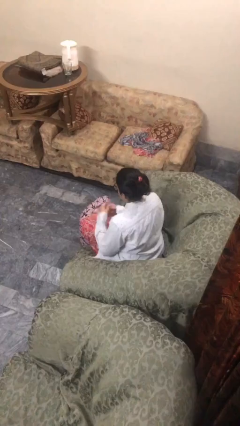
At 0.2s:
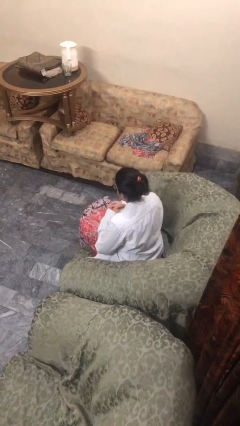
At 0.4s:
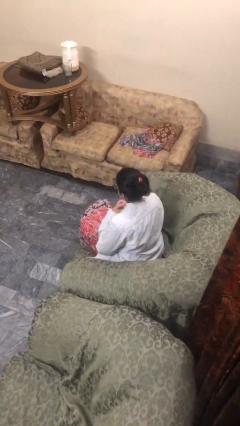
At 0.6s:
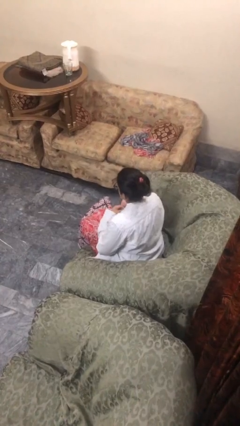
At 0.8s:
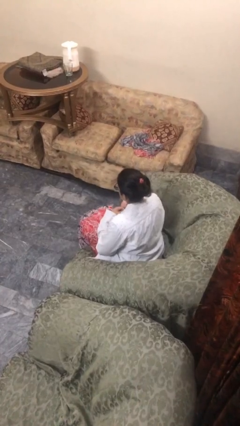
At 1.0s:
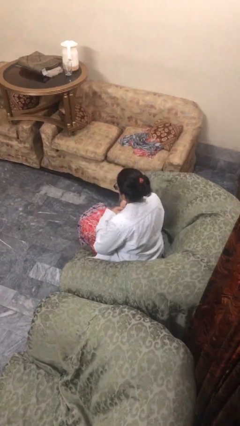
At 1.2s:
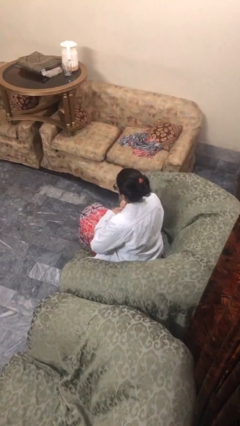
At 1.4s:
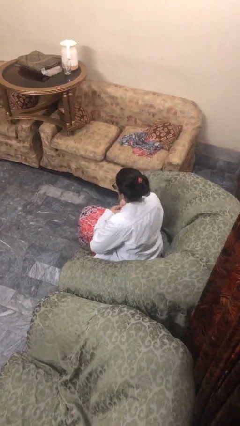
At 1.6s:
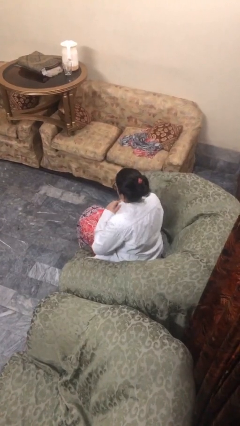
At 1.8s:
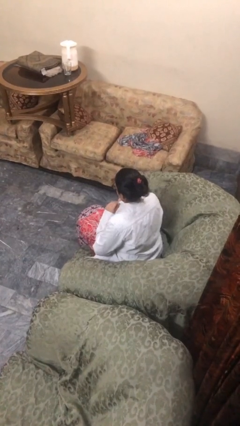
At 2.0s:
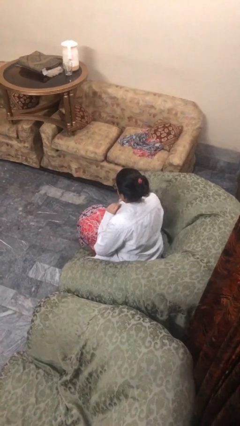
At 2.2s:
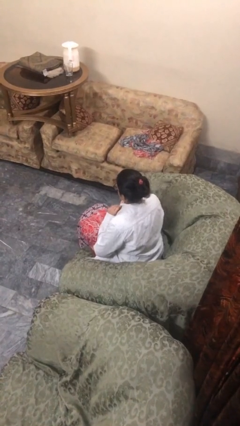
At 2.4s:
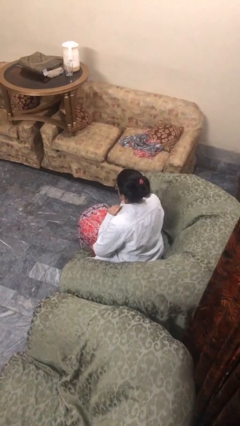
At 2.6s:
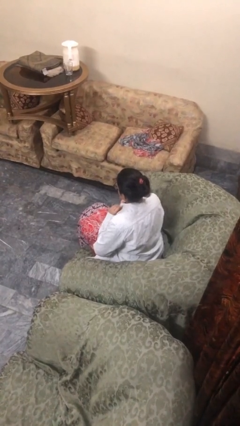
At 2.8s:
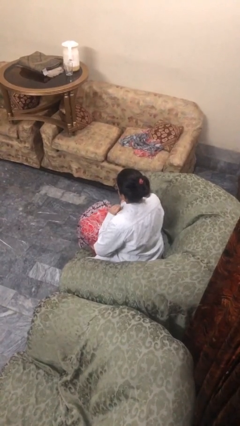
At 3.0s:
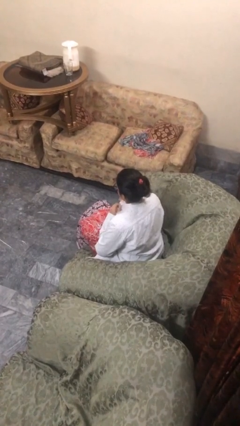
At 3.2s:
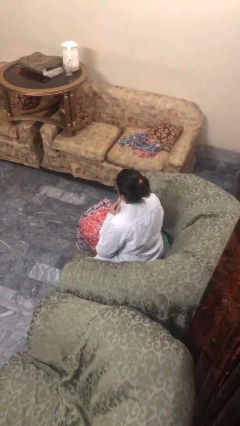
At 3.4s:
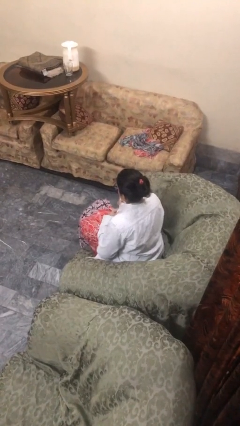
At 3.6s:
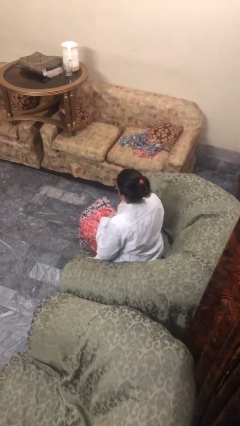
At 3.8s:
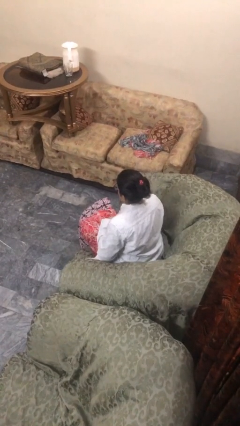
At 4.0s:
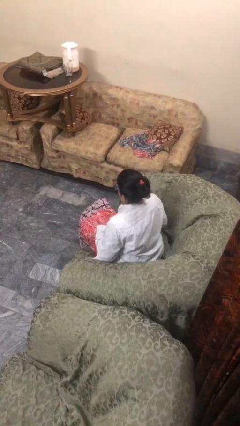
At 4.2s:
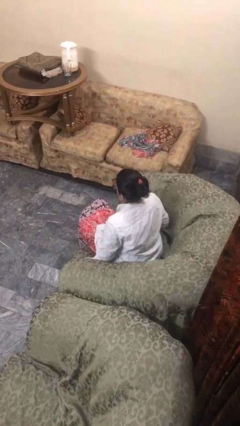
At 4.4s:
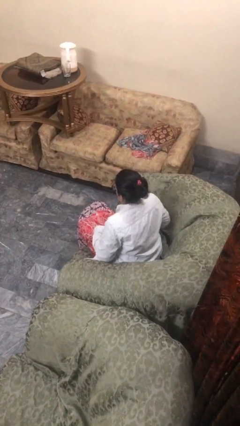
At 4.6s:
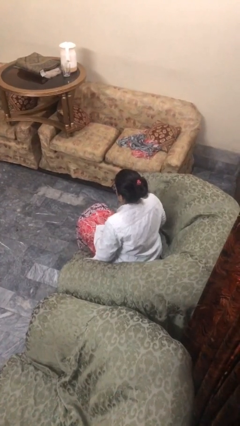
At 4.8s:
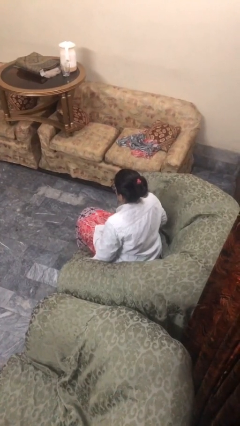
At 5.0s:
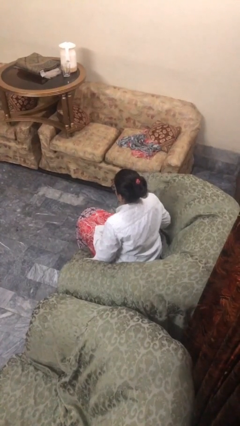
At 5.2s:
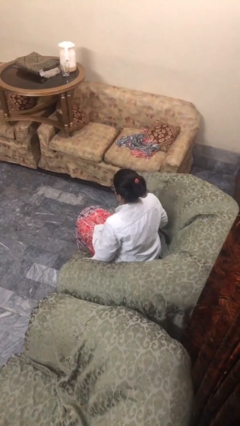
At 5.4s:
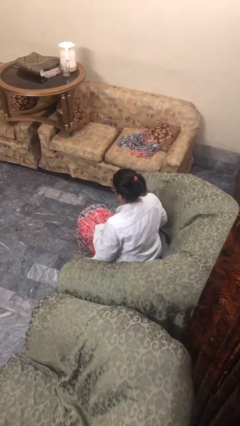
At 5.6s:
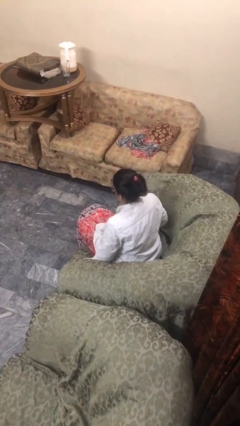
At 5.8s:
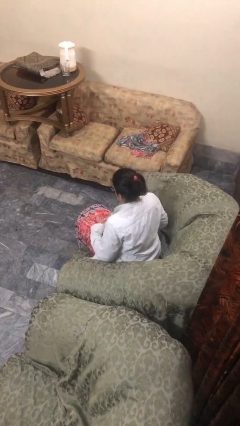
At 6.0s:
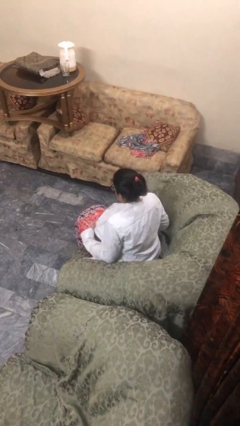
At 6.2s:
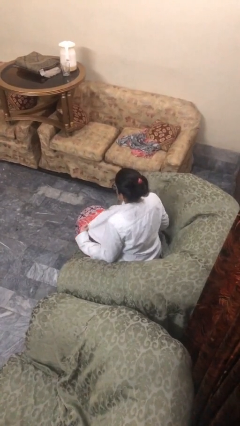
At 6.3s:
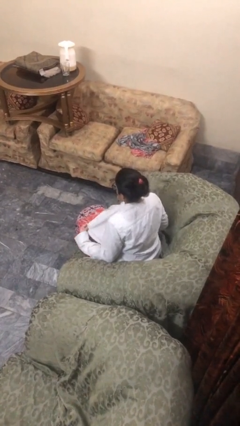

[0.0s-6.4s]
person unbuttons shirt

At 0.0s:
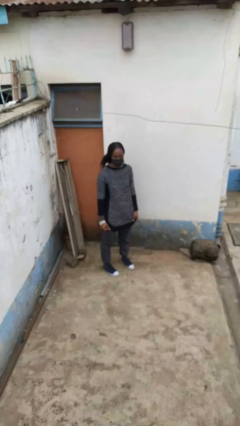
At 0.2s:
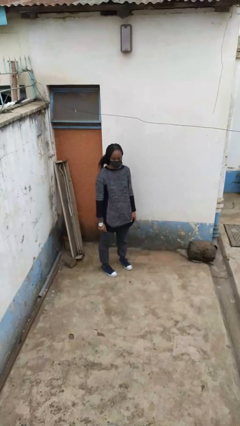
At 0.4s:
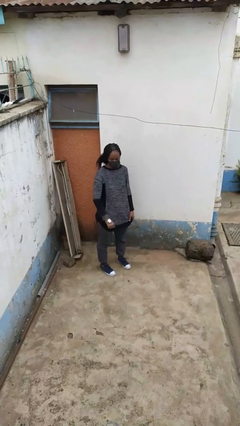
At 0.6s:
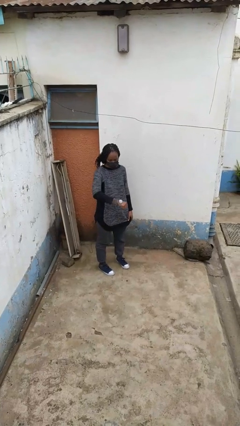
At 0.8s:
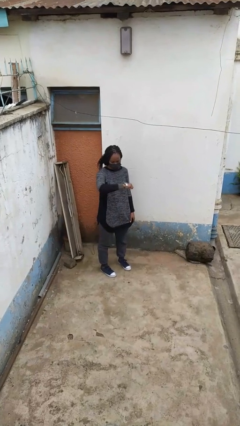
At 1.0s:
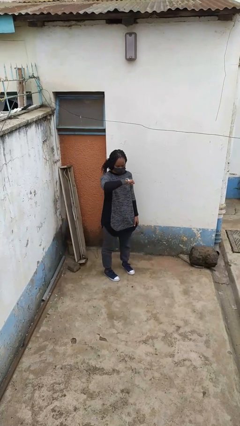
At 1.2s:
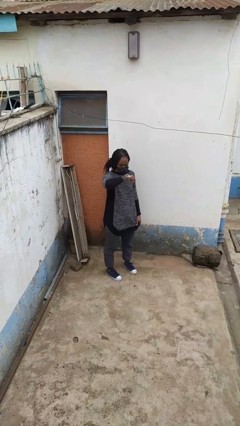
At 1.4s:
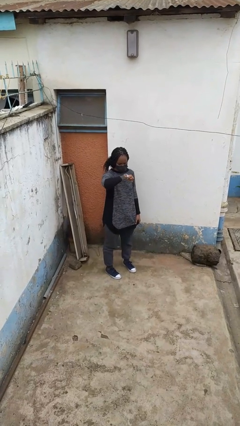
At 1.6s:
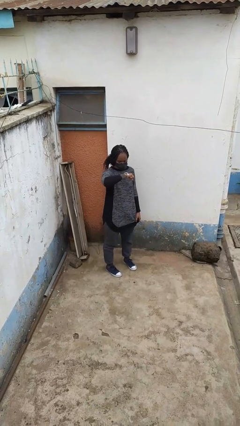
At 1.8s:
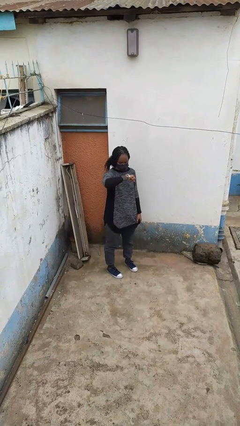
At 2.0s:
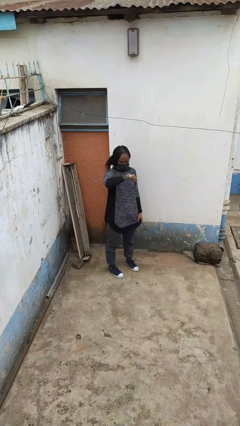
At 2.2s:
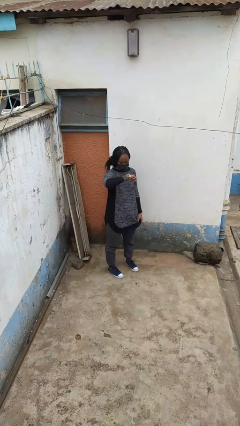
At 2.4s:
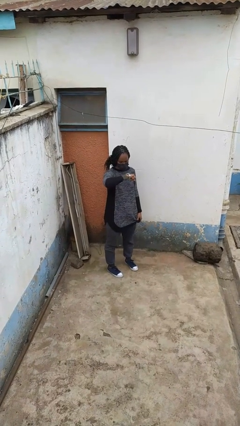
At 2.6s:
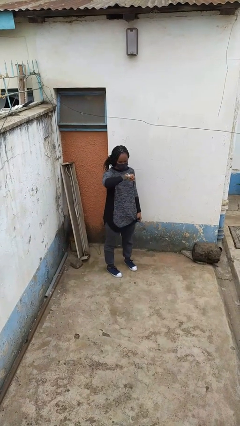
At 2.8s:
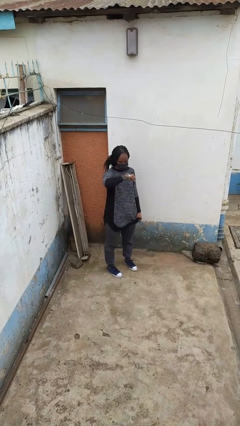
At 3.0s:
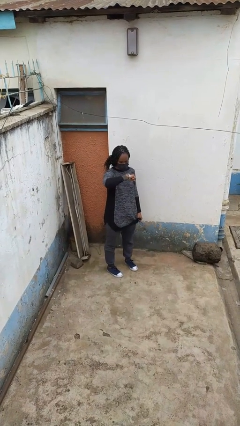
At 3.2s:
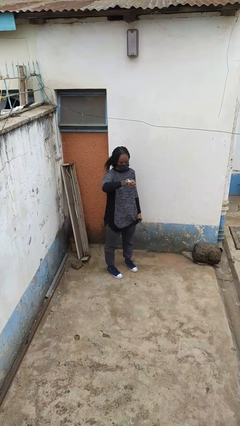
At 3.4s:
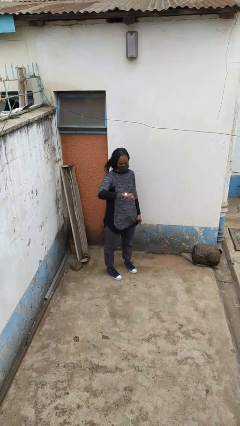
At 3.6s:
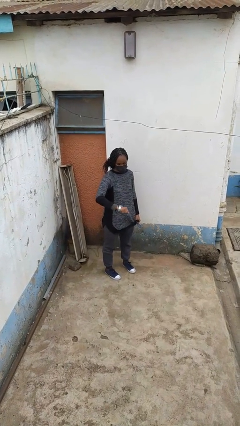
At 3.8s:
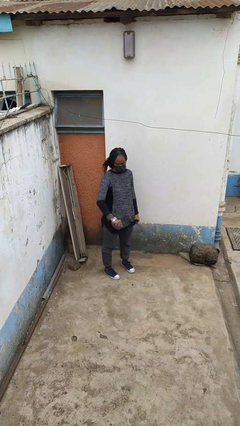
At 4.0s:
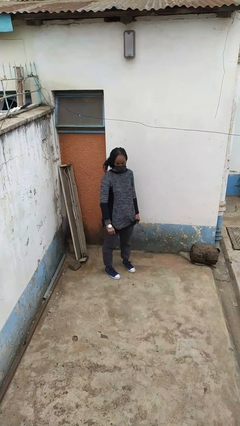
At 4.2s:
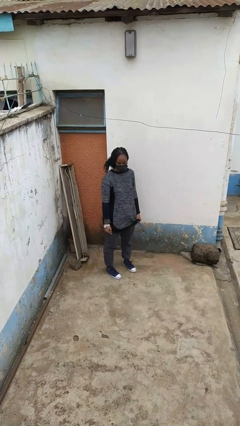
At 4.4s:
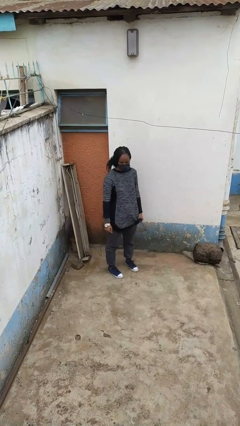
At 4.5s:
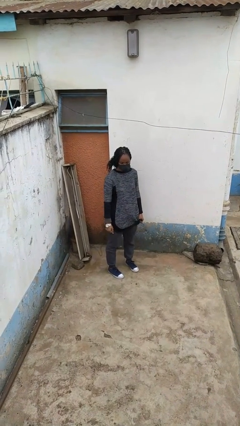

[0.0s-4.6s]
person looks at wristwatch

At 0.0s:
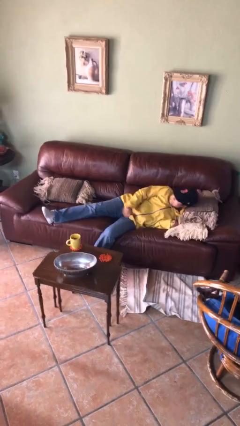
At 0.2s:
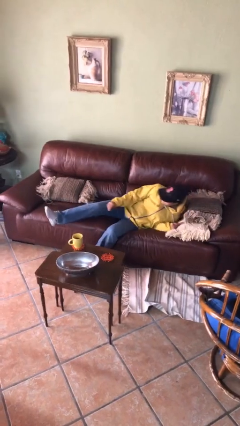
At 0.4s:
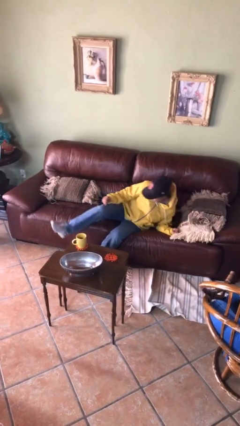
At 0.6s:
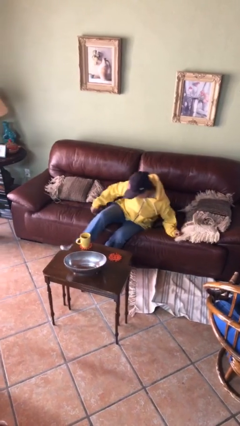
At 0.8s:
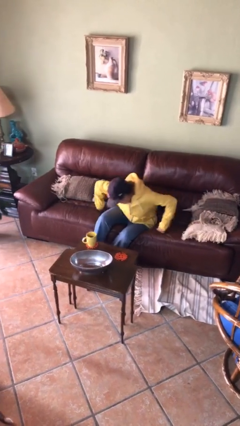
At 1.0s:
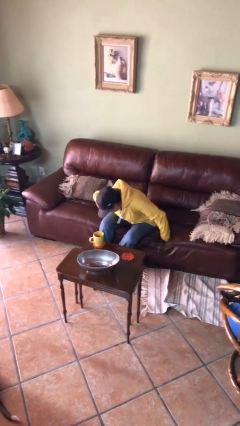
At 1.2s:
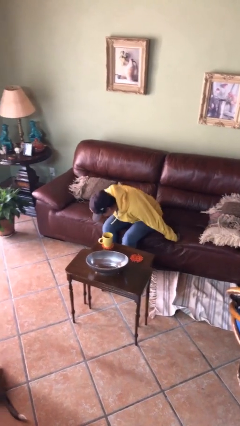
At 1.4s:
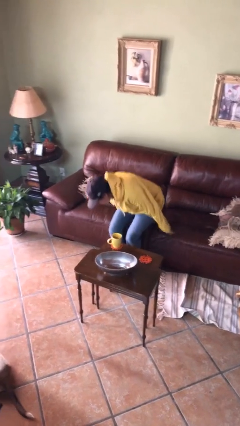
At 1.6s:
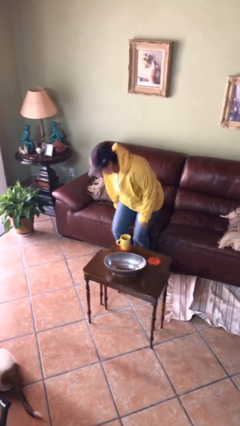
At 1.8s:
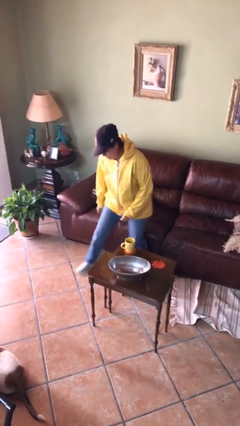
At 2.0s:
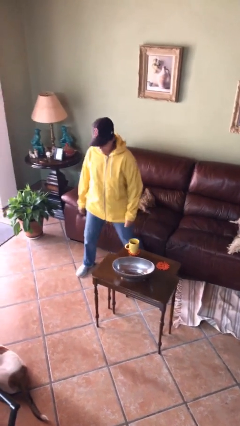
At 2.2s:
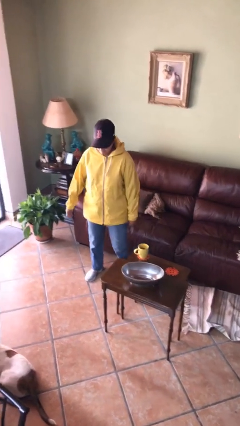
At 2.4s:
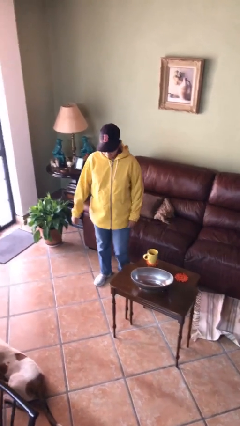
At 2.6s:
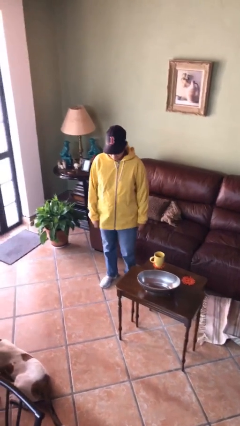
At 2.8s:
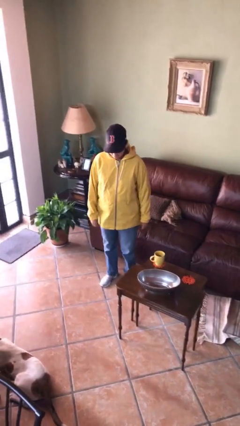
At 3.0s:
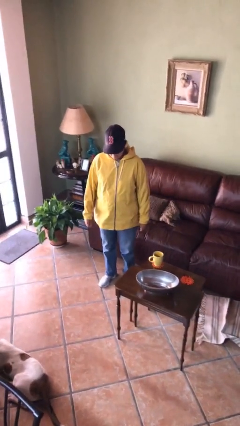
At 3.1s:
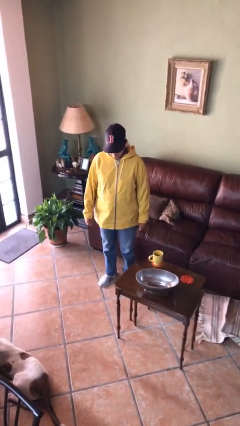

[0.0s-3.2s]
person stands up

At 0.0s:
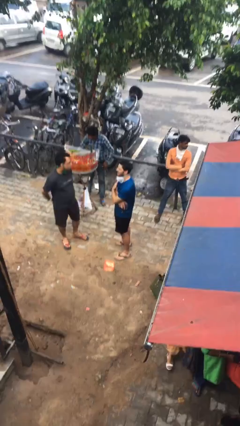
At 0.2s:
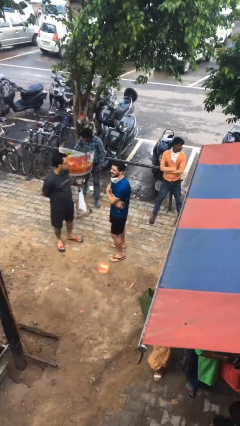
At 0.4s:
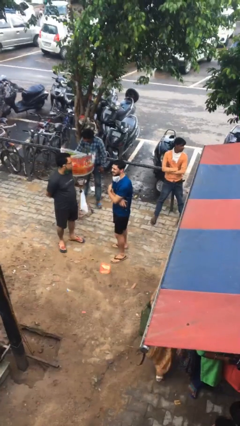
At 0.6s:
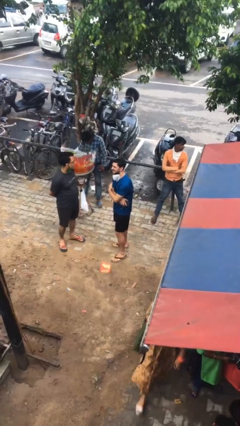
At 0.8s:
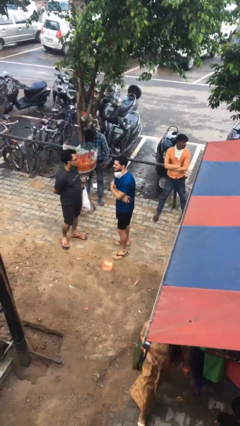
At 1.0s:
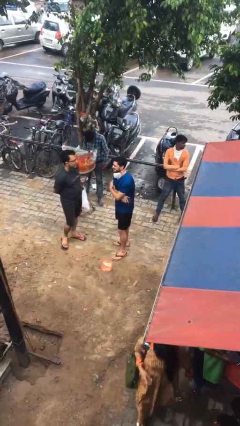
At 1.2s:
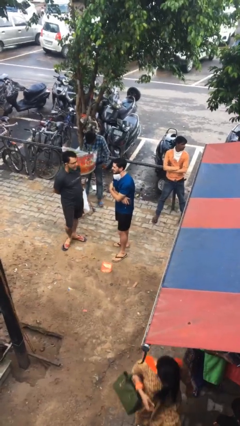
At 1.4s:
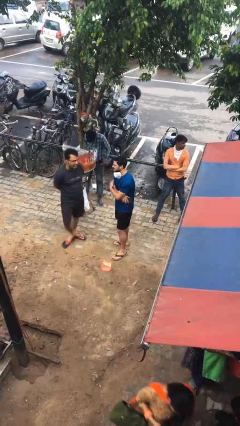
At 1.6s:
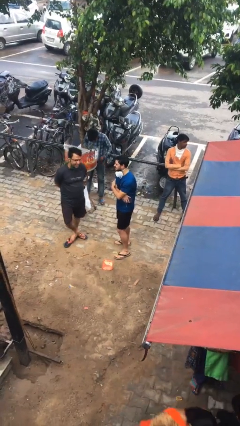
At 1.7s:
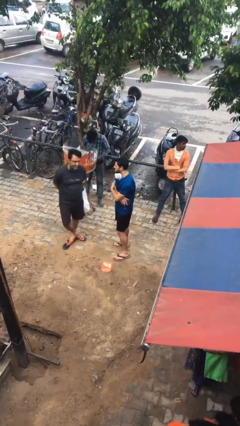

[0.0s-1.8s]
person laughs with person

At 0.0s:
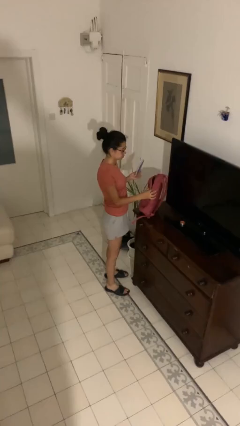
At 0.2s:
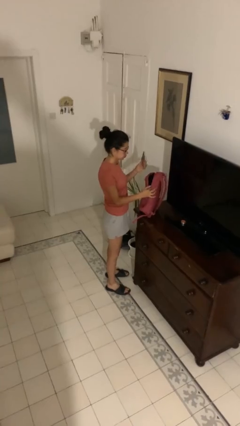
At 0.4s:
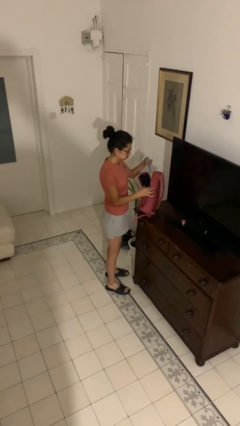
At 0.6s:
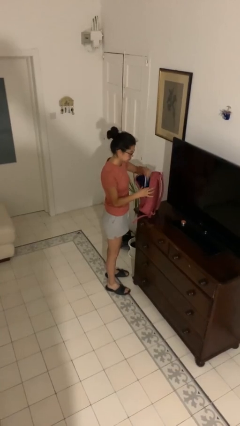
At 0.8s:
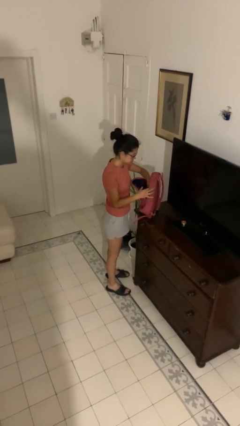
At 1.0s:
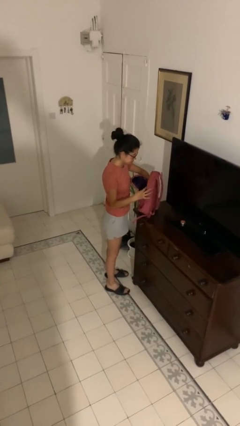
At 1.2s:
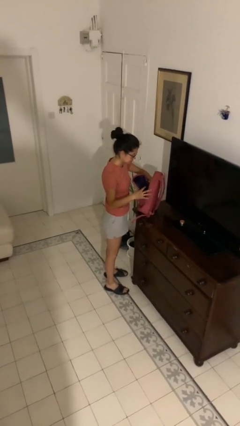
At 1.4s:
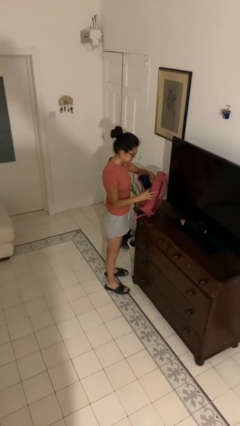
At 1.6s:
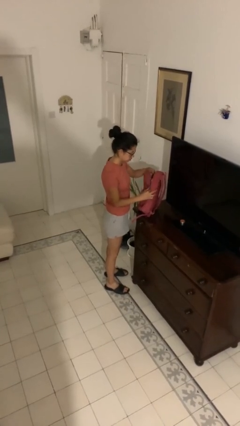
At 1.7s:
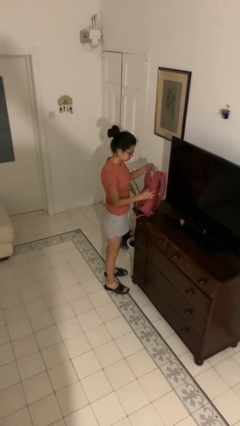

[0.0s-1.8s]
person puts object into backpack
